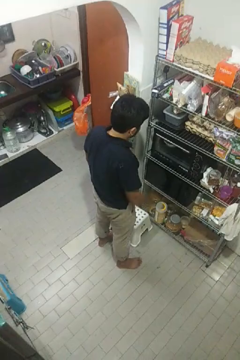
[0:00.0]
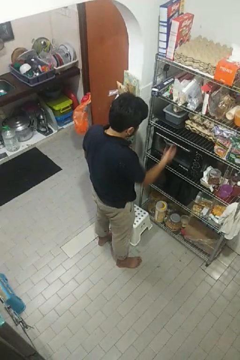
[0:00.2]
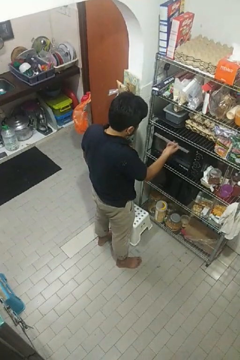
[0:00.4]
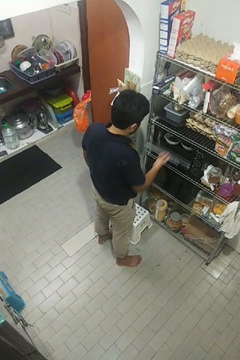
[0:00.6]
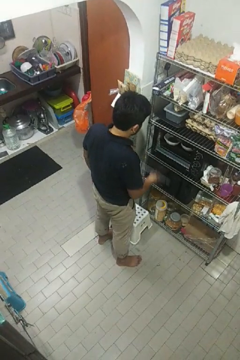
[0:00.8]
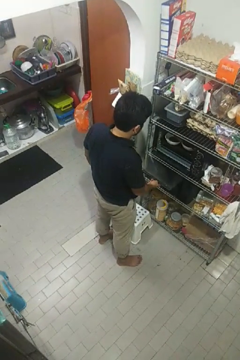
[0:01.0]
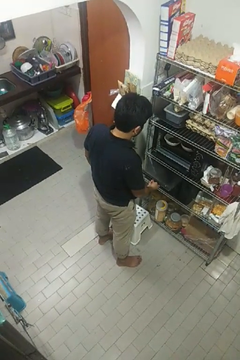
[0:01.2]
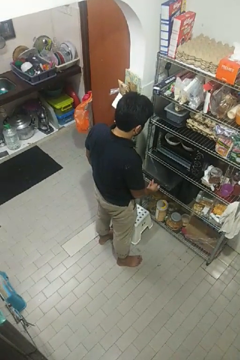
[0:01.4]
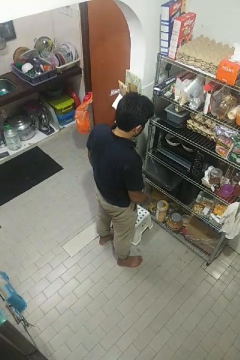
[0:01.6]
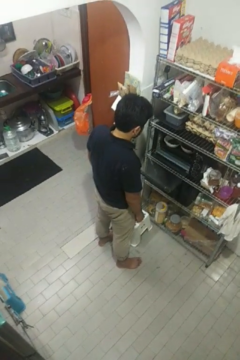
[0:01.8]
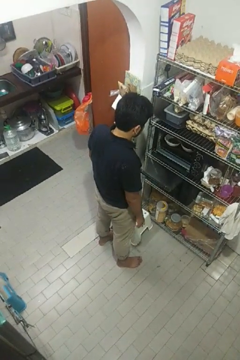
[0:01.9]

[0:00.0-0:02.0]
person opens oven door

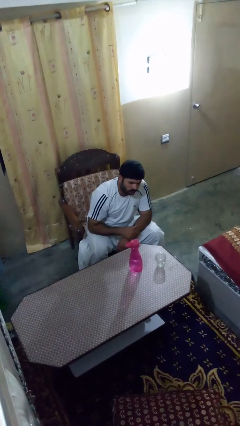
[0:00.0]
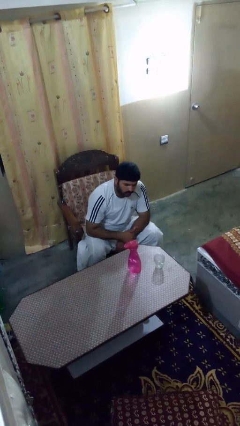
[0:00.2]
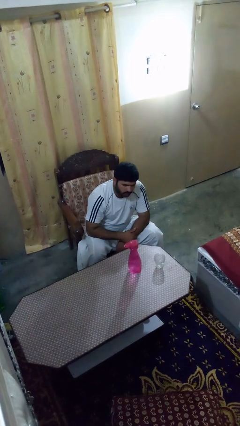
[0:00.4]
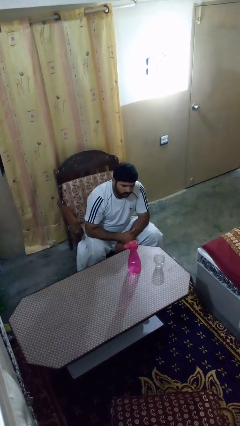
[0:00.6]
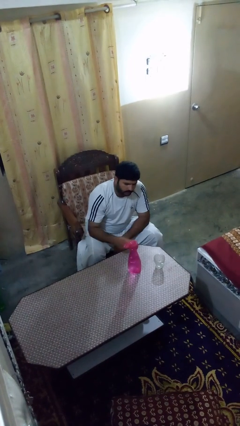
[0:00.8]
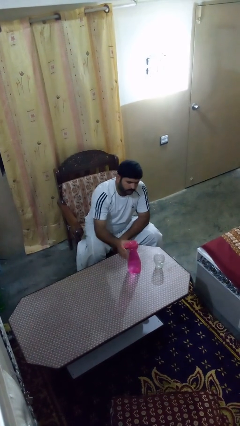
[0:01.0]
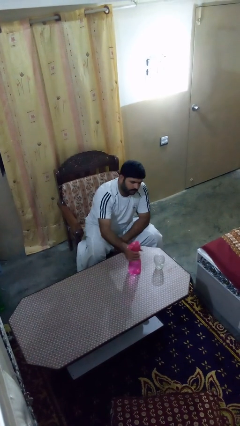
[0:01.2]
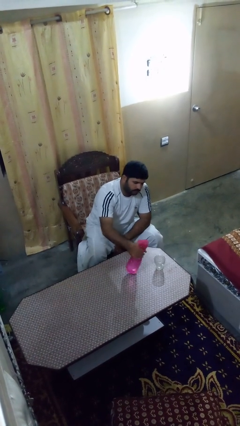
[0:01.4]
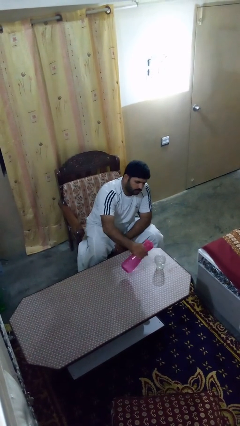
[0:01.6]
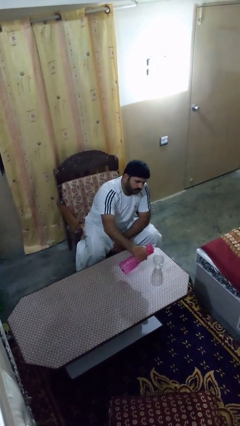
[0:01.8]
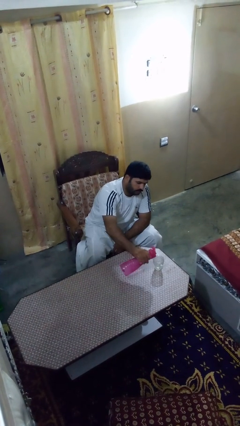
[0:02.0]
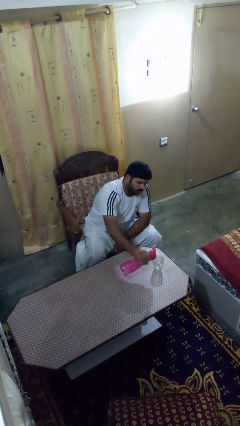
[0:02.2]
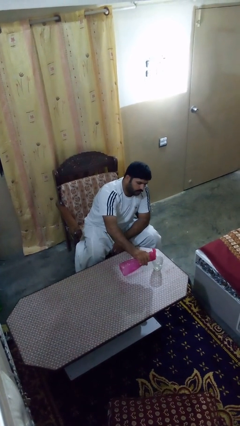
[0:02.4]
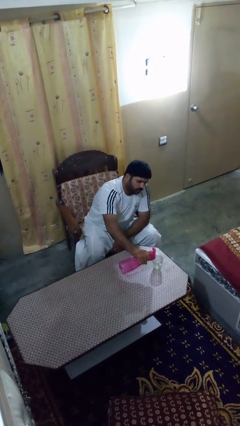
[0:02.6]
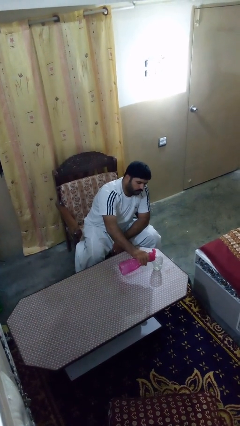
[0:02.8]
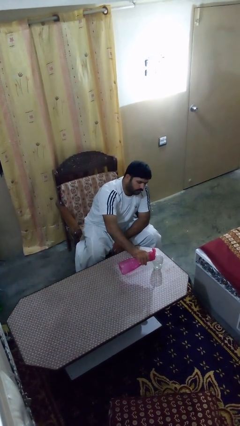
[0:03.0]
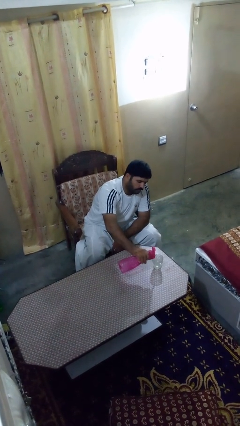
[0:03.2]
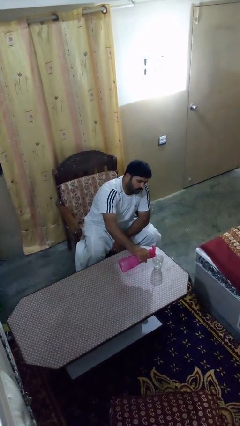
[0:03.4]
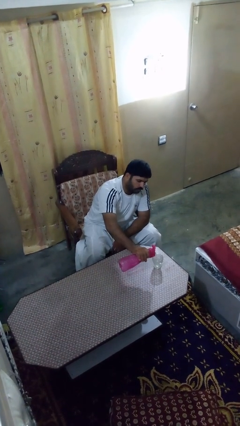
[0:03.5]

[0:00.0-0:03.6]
person pours liquid into cup

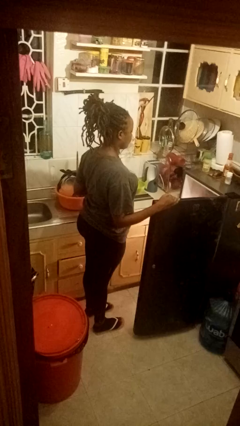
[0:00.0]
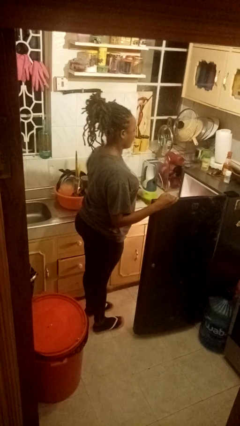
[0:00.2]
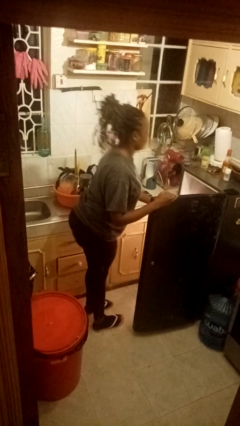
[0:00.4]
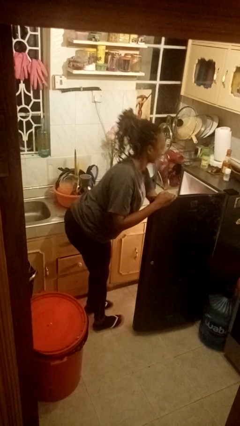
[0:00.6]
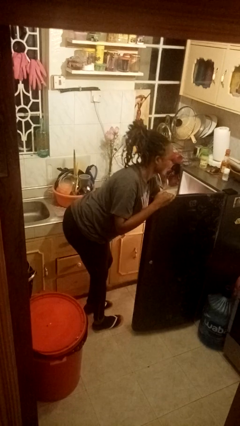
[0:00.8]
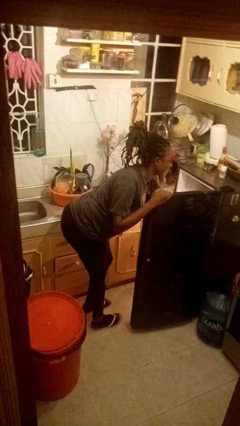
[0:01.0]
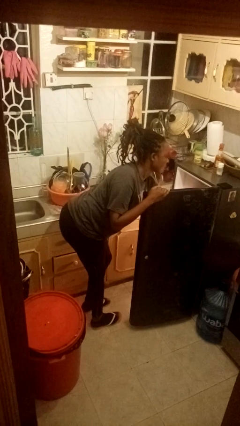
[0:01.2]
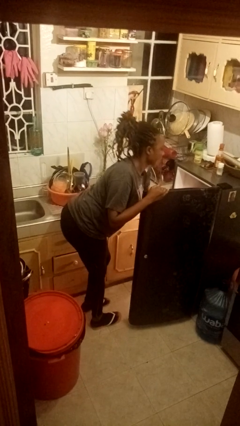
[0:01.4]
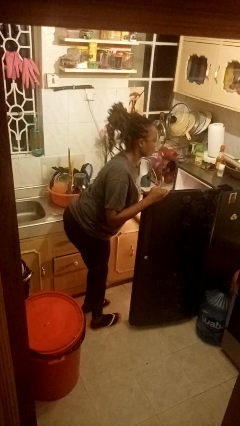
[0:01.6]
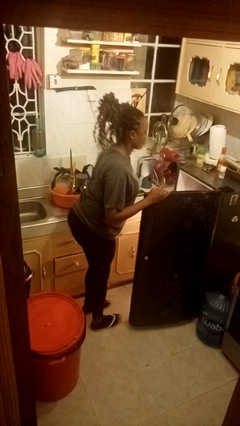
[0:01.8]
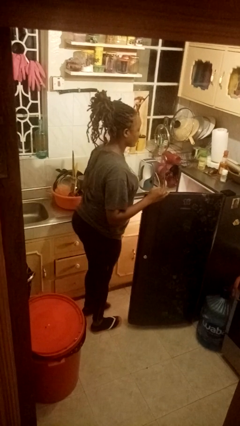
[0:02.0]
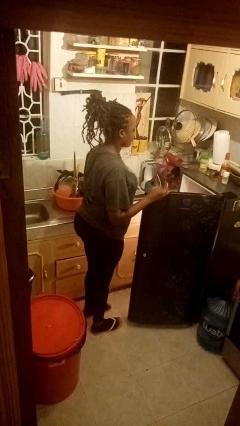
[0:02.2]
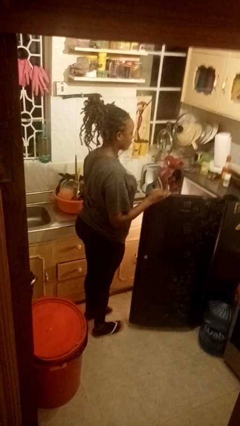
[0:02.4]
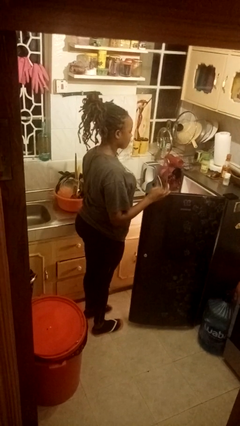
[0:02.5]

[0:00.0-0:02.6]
person puts object into refrigerator

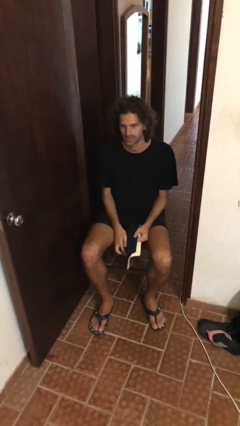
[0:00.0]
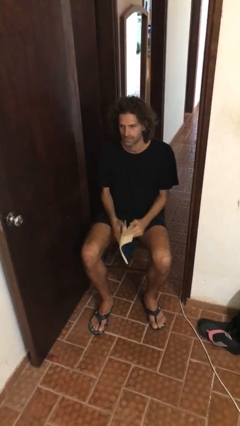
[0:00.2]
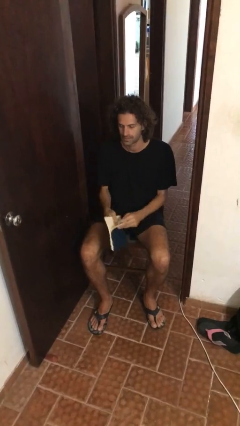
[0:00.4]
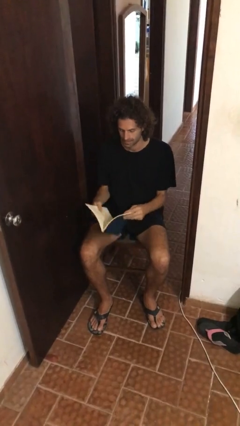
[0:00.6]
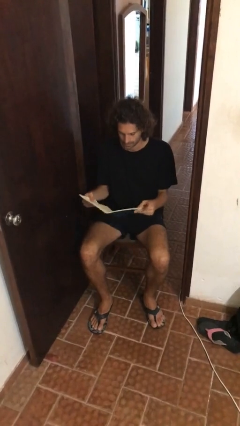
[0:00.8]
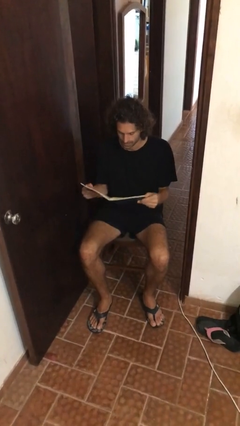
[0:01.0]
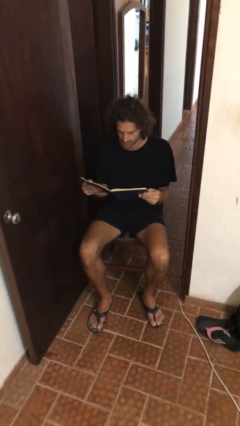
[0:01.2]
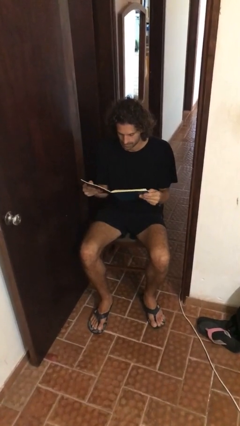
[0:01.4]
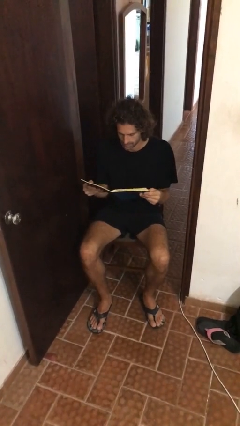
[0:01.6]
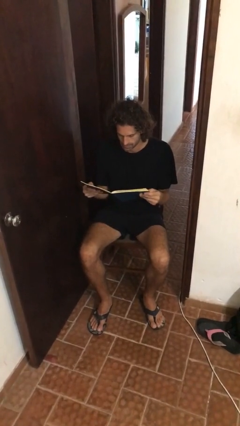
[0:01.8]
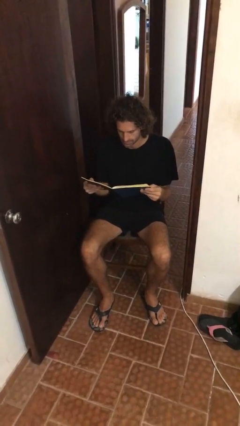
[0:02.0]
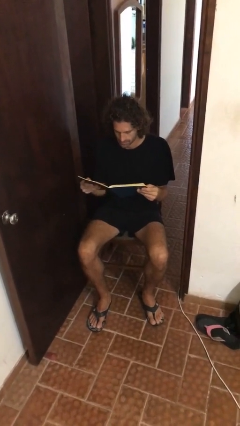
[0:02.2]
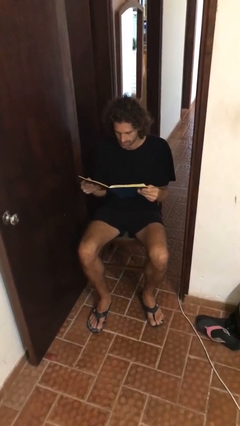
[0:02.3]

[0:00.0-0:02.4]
person reads document

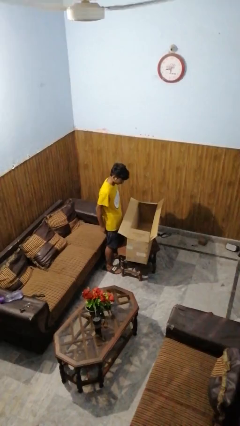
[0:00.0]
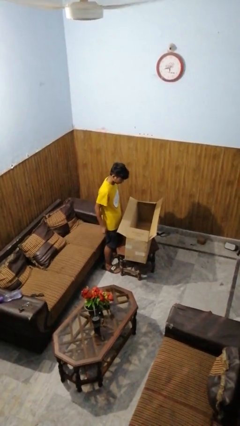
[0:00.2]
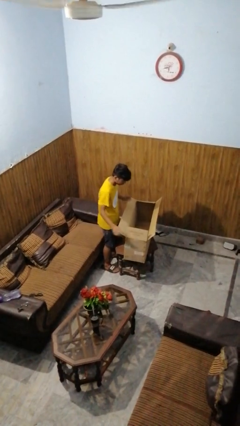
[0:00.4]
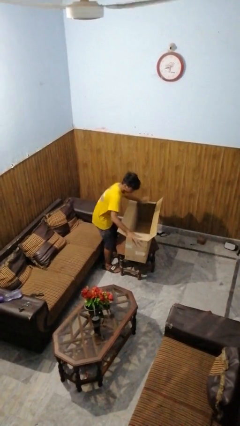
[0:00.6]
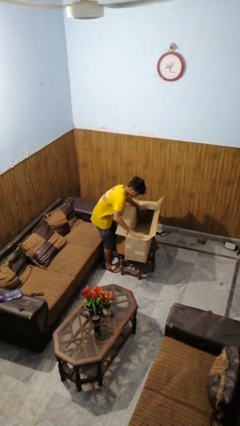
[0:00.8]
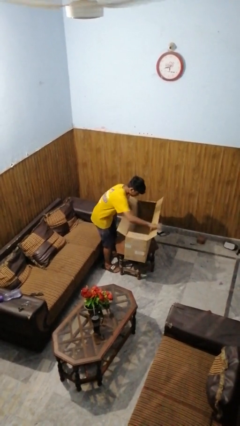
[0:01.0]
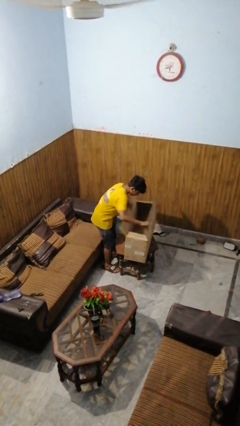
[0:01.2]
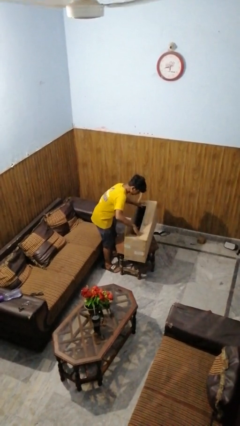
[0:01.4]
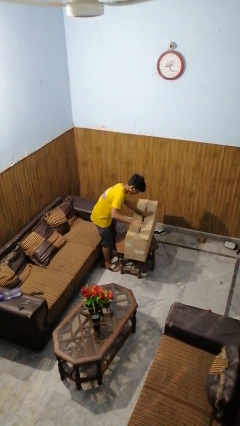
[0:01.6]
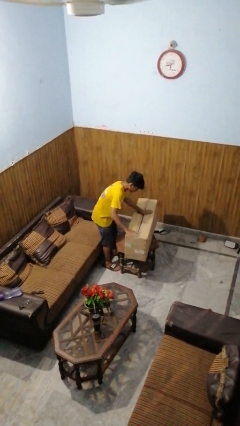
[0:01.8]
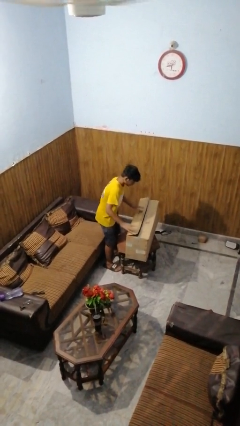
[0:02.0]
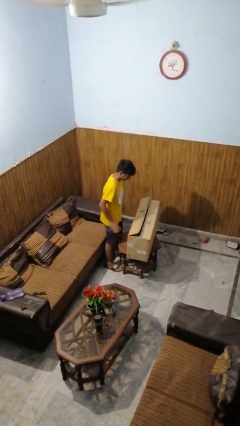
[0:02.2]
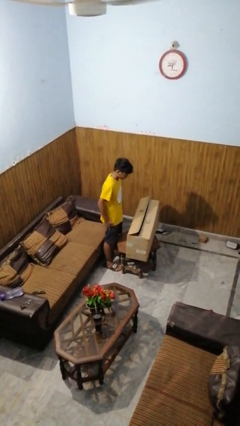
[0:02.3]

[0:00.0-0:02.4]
person closes box

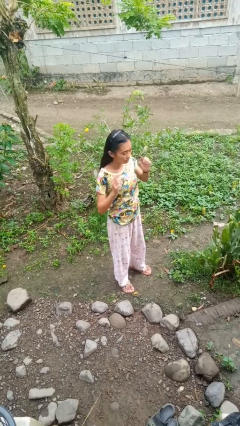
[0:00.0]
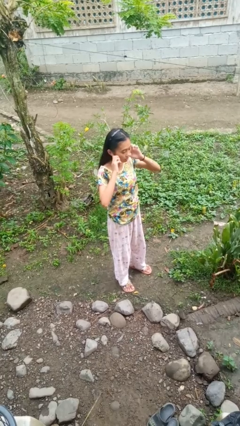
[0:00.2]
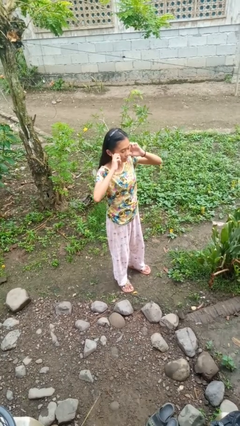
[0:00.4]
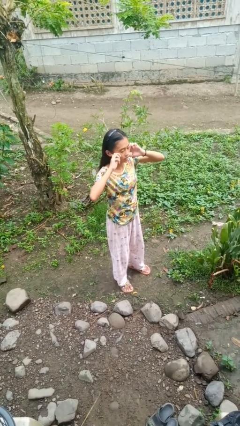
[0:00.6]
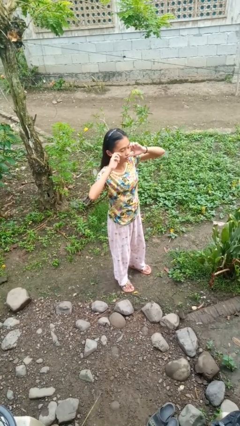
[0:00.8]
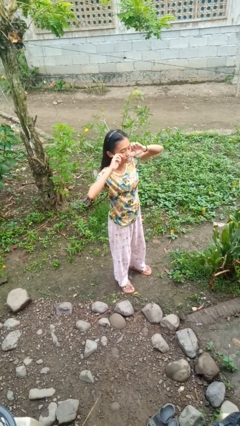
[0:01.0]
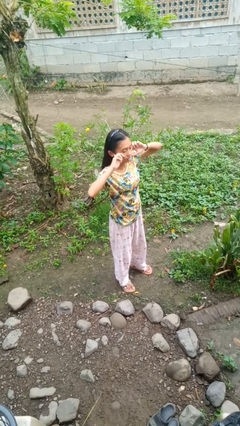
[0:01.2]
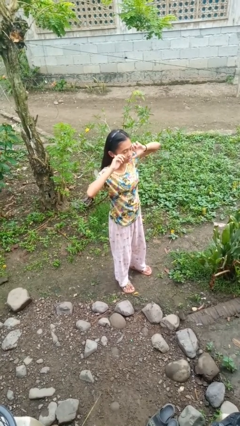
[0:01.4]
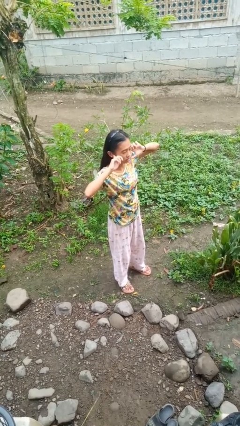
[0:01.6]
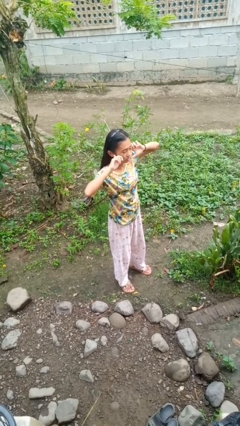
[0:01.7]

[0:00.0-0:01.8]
person puts fingers in ear

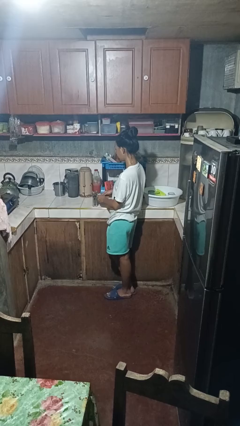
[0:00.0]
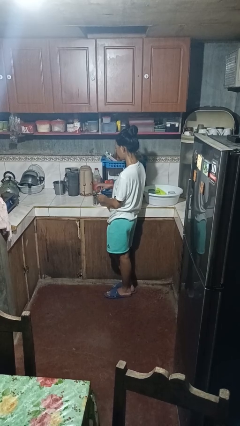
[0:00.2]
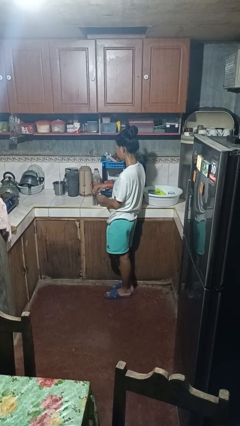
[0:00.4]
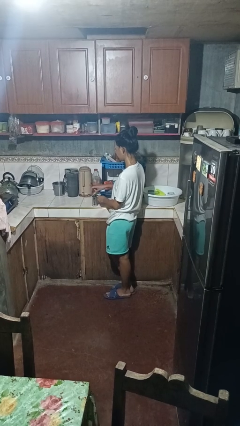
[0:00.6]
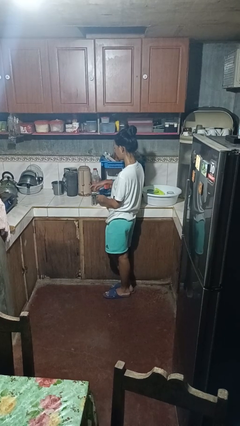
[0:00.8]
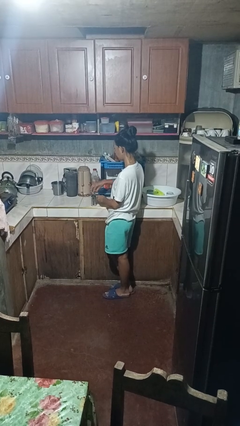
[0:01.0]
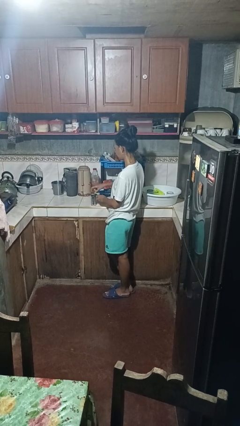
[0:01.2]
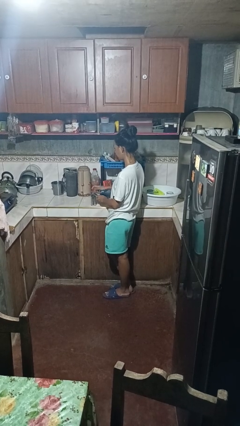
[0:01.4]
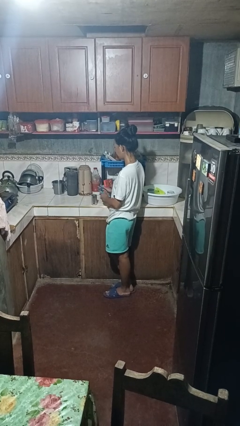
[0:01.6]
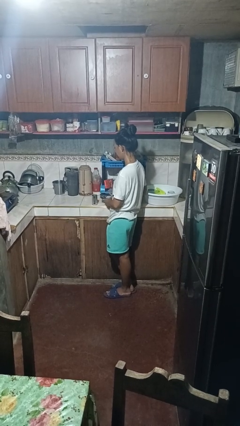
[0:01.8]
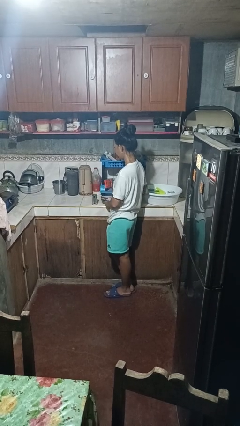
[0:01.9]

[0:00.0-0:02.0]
person opens can with can opener

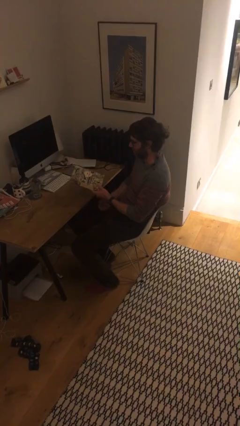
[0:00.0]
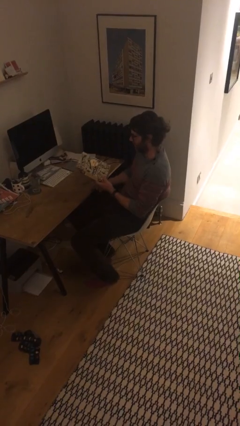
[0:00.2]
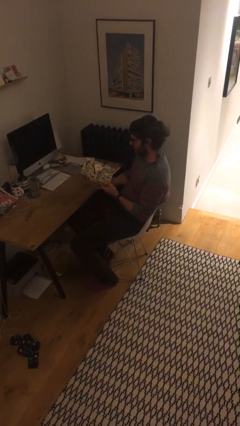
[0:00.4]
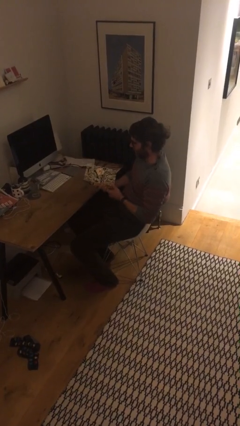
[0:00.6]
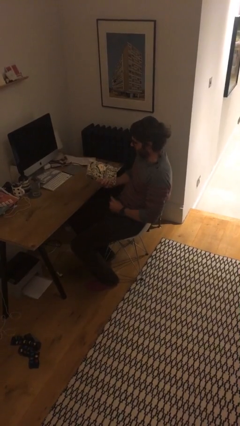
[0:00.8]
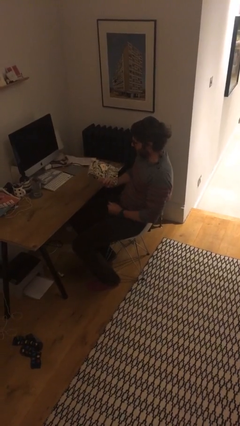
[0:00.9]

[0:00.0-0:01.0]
person picks up object from table
